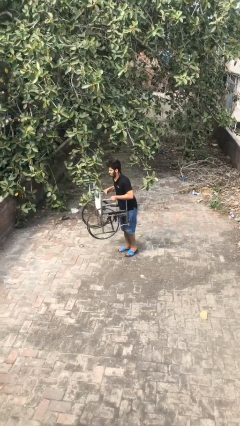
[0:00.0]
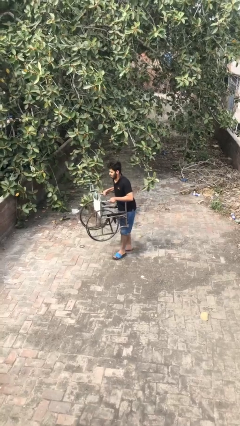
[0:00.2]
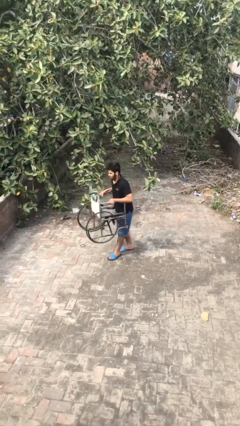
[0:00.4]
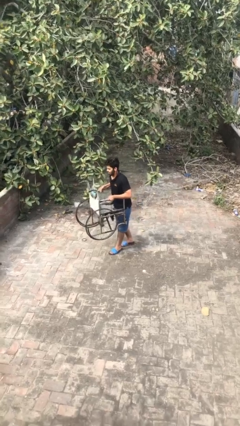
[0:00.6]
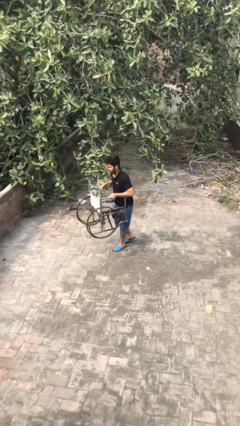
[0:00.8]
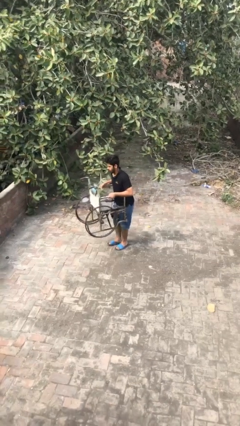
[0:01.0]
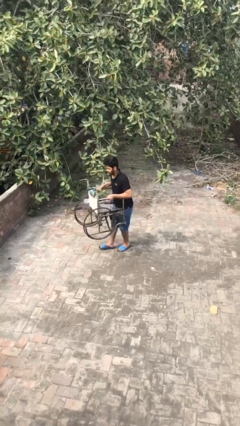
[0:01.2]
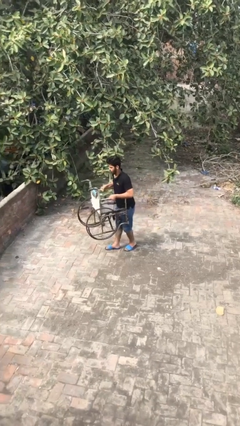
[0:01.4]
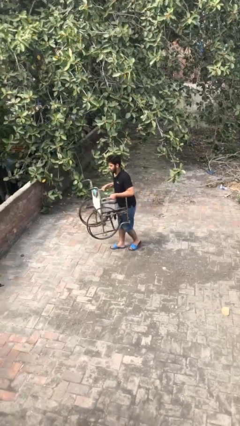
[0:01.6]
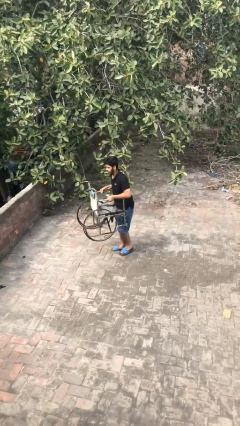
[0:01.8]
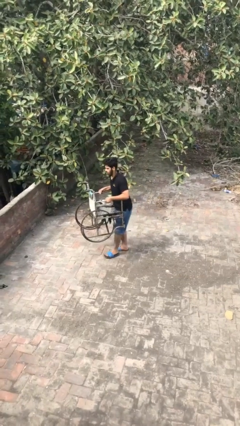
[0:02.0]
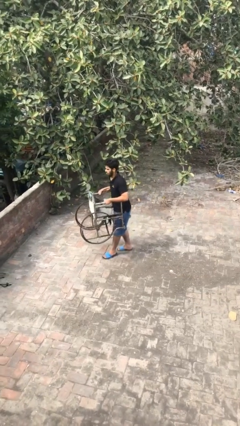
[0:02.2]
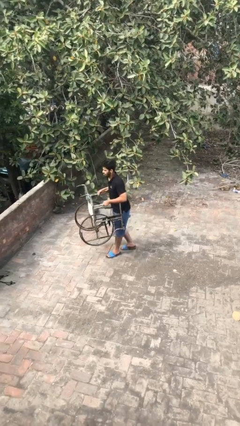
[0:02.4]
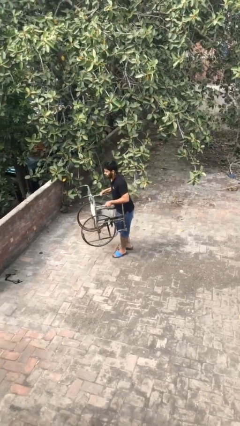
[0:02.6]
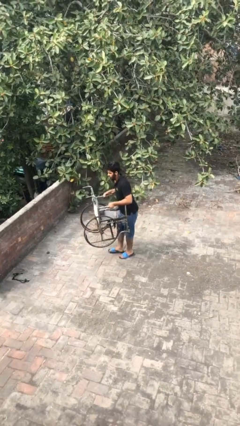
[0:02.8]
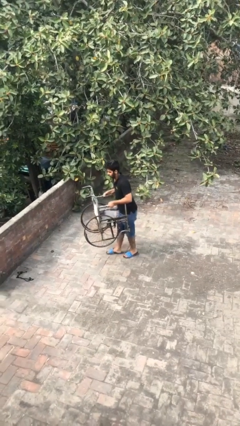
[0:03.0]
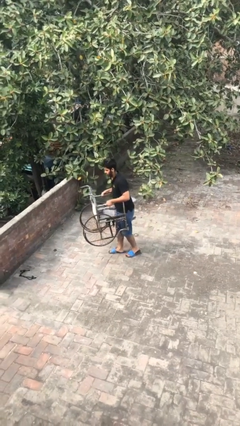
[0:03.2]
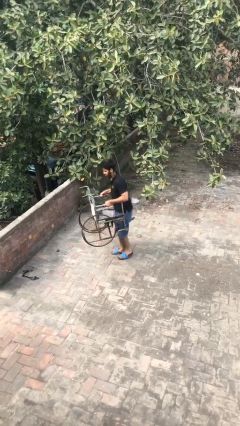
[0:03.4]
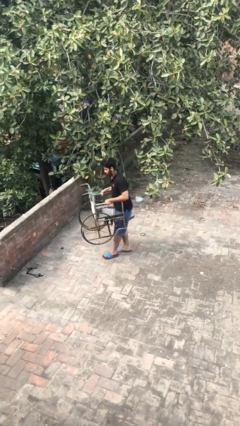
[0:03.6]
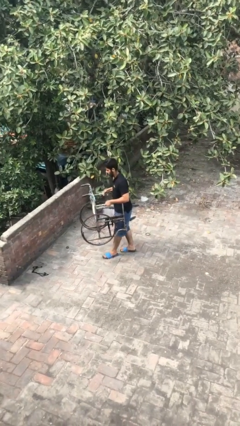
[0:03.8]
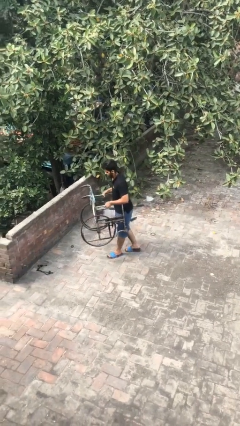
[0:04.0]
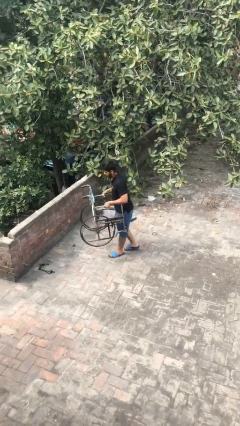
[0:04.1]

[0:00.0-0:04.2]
person carries heavy object

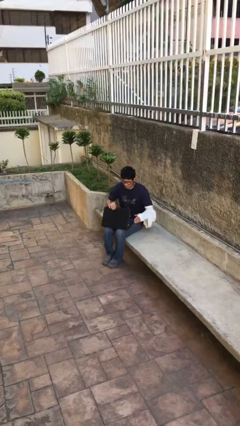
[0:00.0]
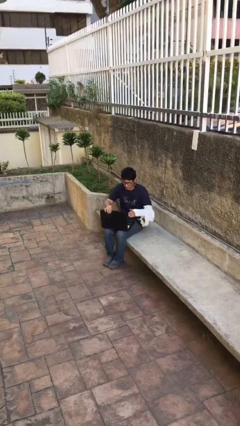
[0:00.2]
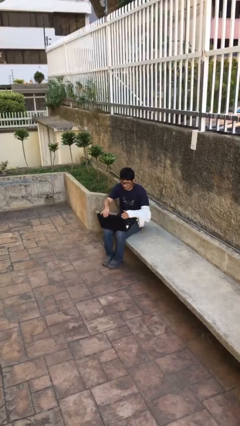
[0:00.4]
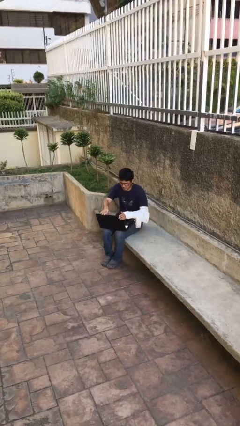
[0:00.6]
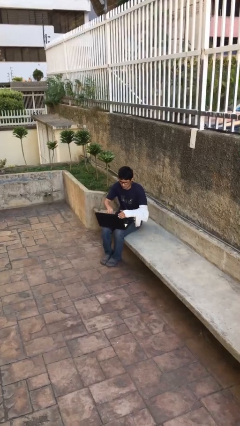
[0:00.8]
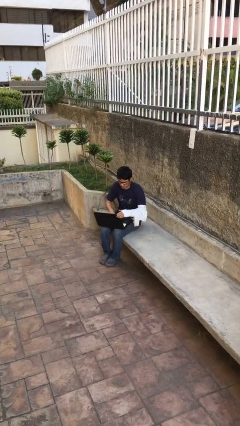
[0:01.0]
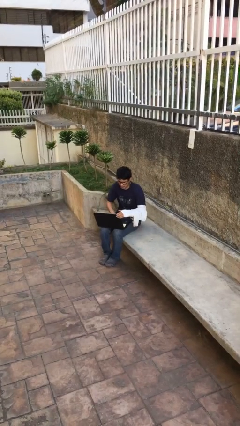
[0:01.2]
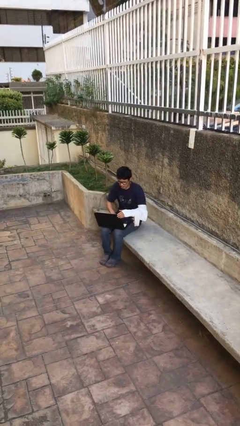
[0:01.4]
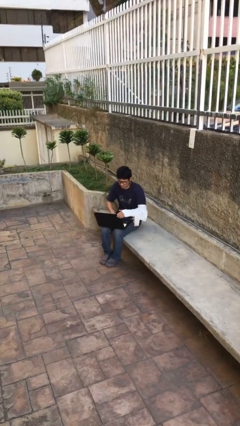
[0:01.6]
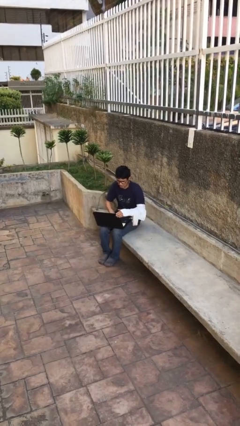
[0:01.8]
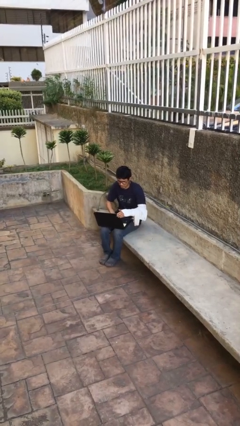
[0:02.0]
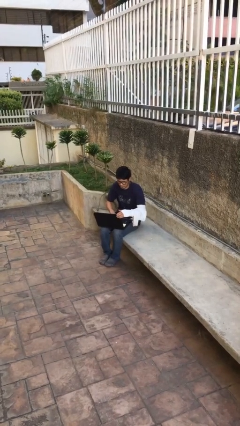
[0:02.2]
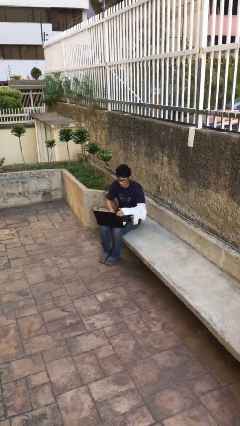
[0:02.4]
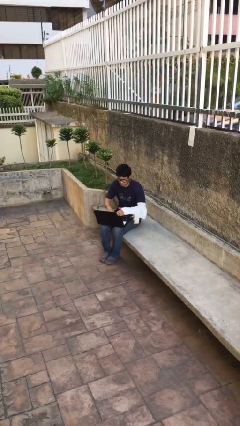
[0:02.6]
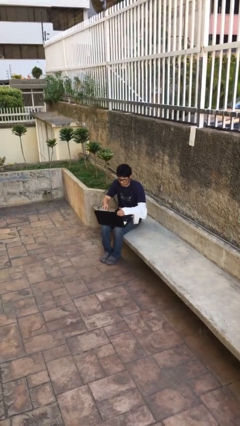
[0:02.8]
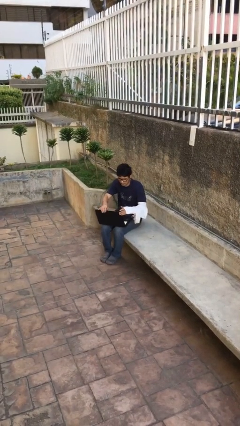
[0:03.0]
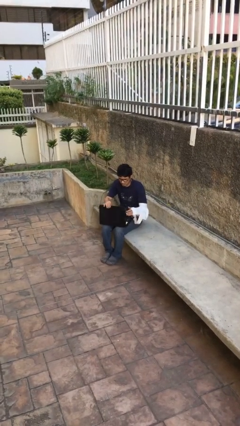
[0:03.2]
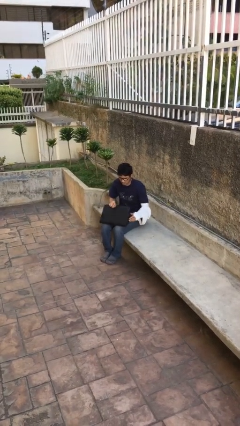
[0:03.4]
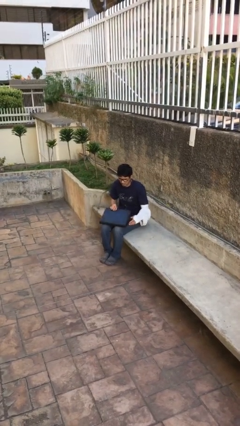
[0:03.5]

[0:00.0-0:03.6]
person interacts with laptop

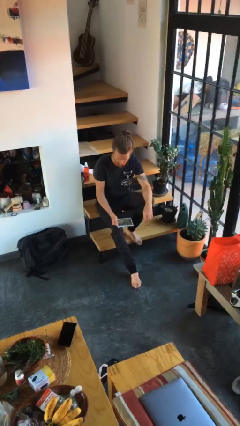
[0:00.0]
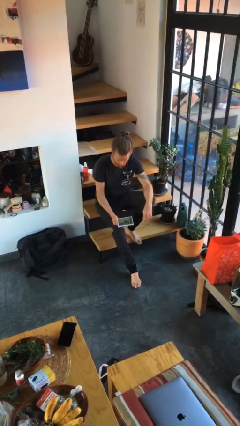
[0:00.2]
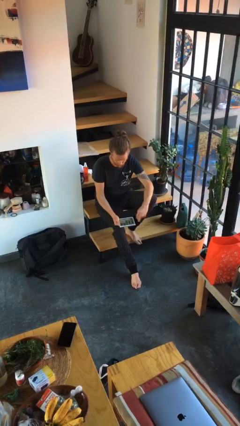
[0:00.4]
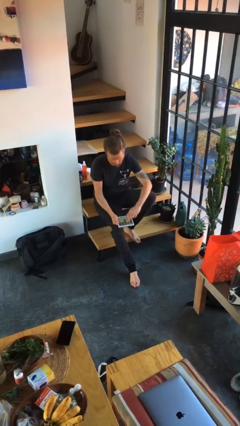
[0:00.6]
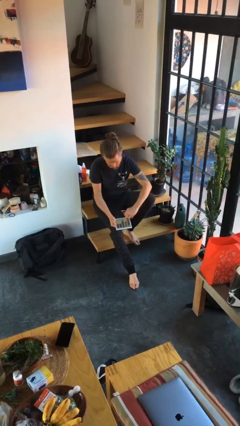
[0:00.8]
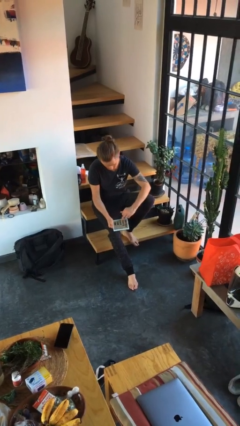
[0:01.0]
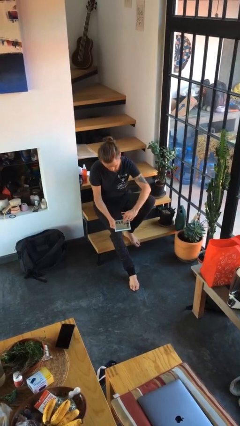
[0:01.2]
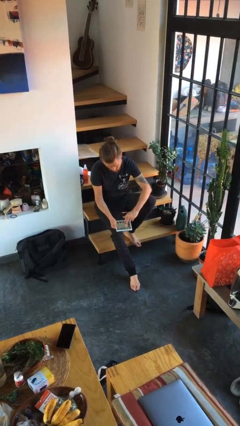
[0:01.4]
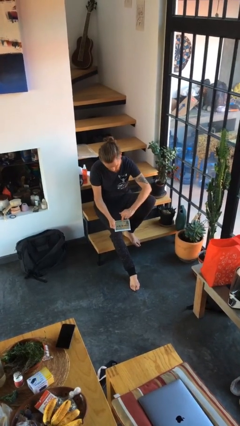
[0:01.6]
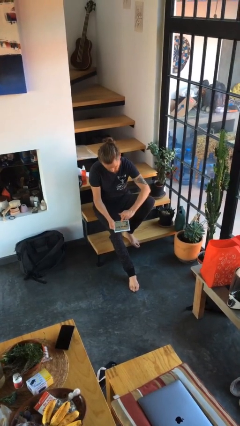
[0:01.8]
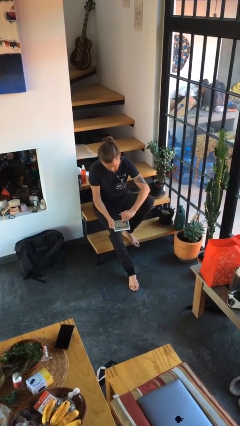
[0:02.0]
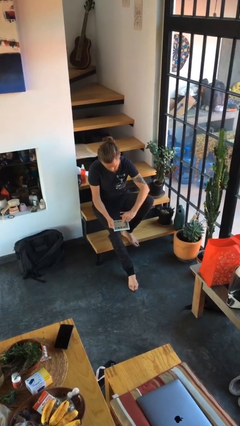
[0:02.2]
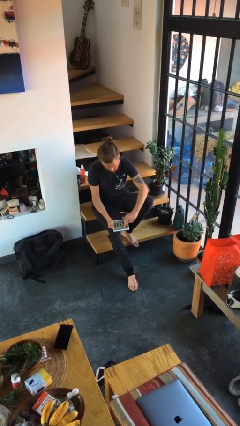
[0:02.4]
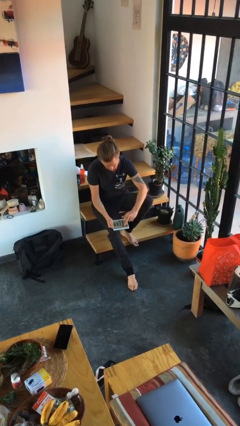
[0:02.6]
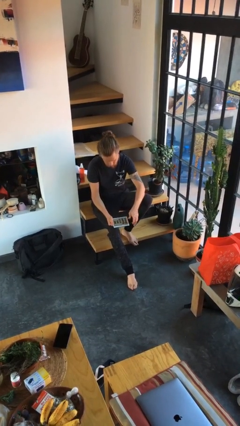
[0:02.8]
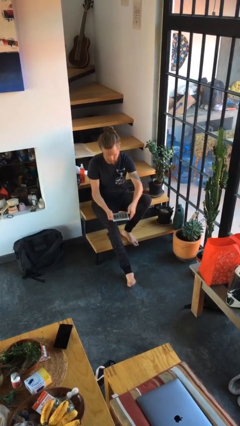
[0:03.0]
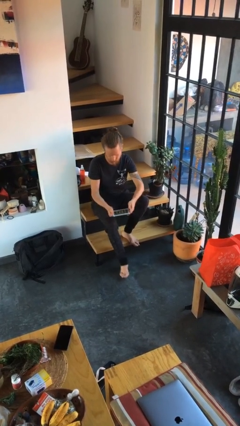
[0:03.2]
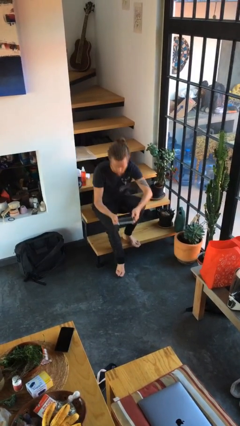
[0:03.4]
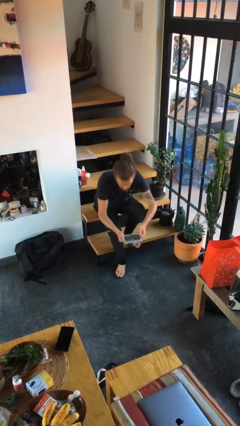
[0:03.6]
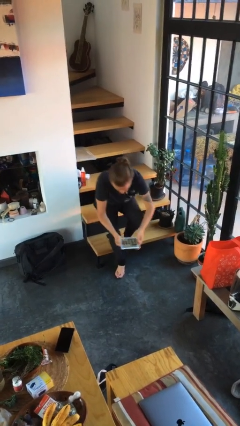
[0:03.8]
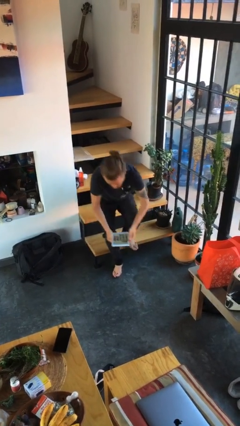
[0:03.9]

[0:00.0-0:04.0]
person interacts with tablet

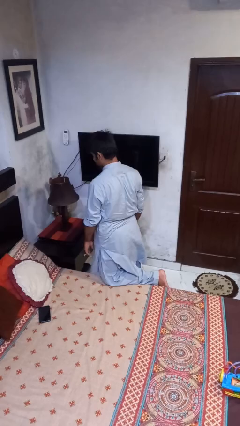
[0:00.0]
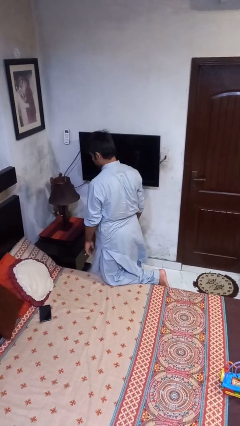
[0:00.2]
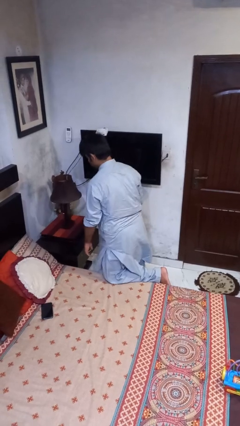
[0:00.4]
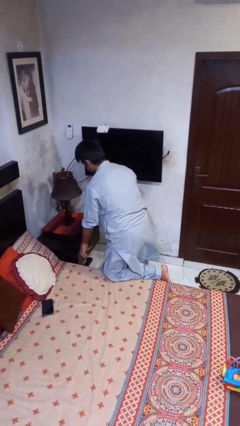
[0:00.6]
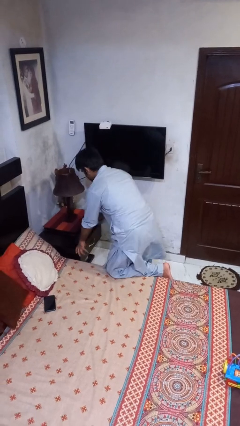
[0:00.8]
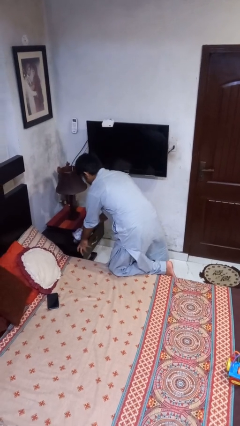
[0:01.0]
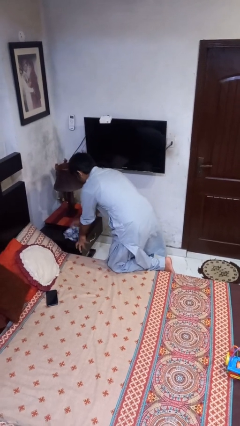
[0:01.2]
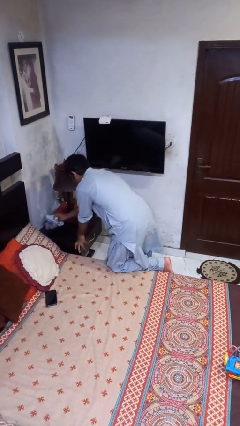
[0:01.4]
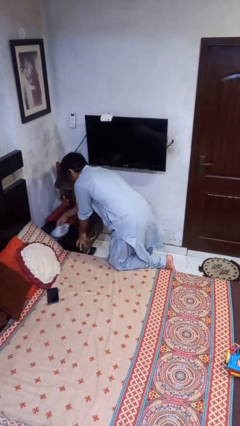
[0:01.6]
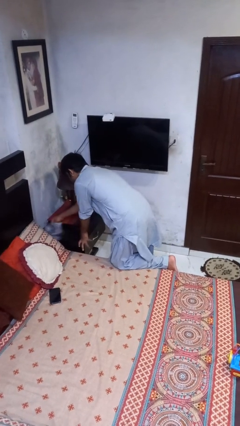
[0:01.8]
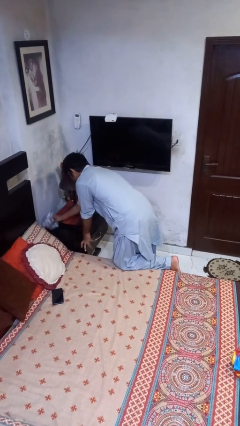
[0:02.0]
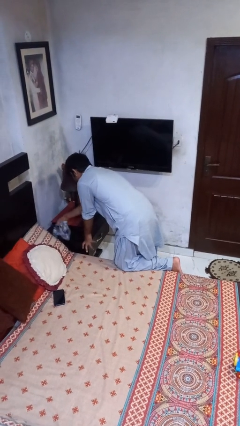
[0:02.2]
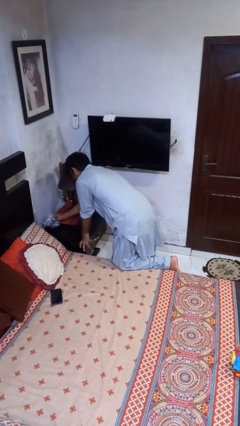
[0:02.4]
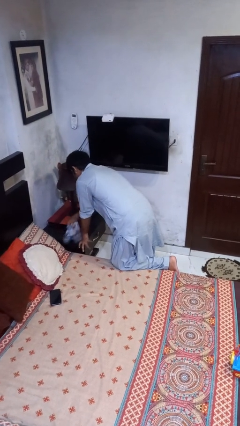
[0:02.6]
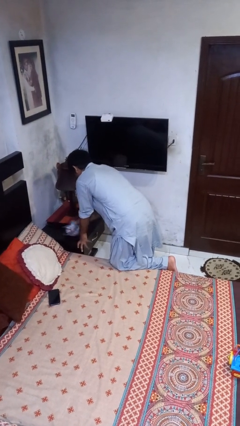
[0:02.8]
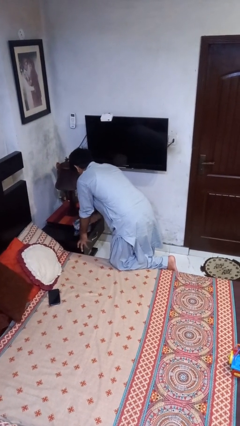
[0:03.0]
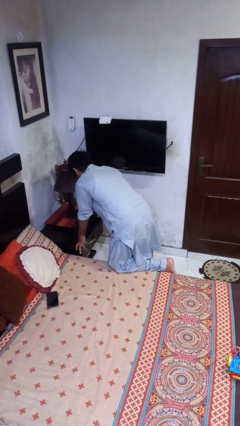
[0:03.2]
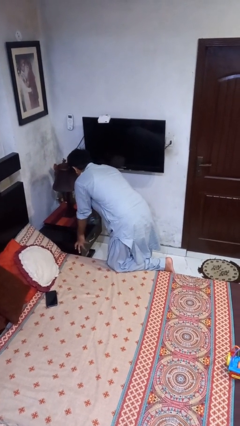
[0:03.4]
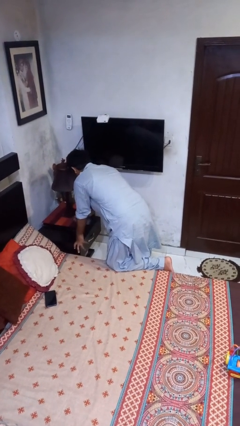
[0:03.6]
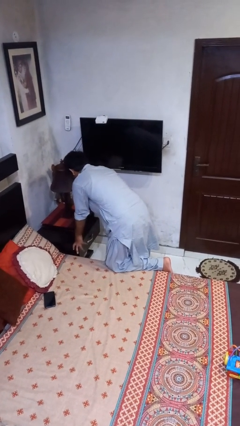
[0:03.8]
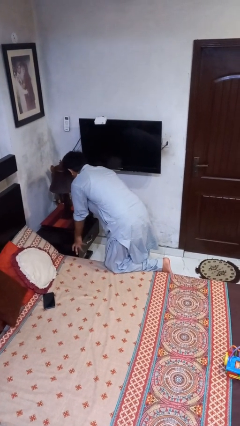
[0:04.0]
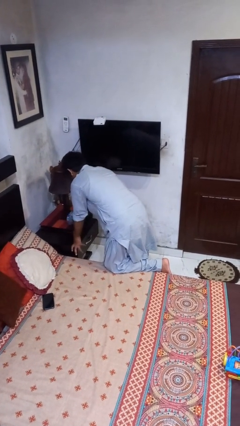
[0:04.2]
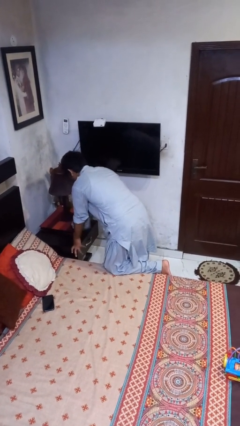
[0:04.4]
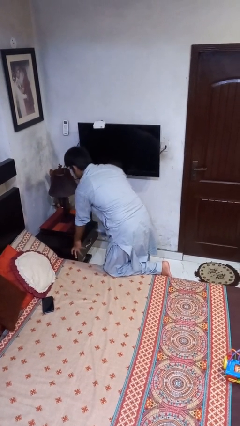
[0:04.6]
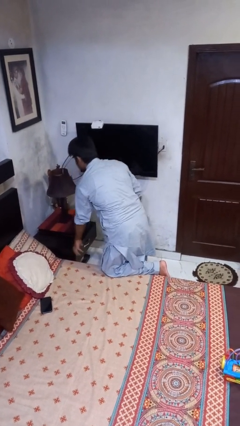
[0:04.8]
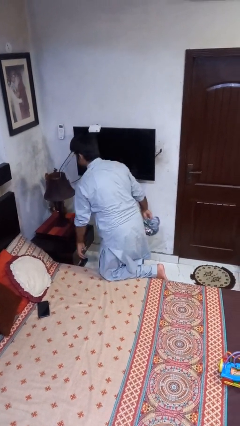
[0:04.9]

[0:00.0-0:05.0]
person cleans table with rag

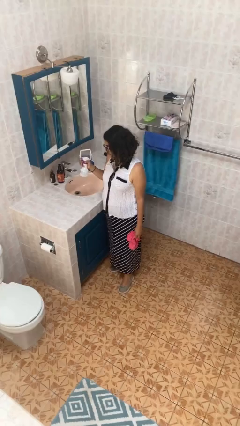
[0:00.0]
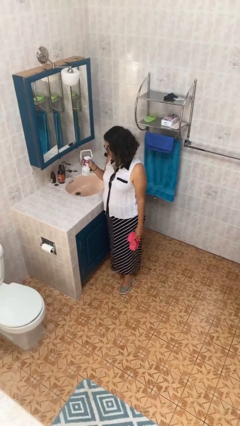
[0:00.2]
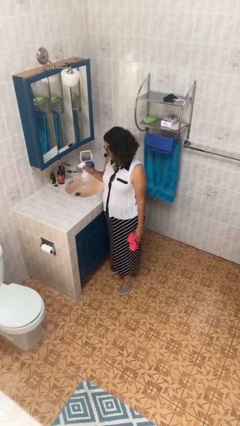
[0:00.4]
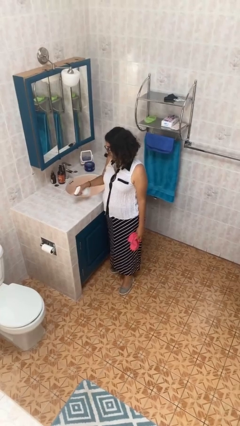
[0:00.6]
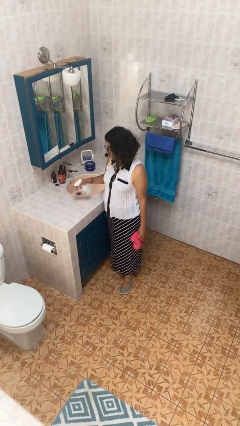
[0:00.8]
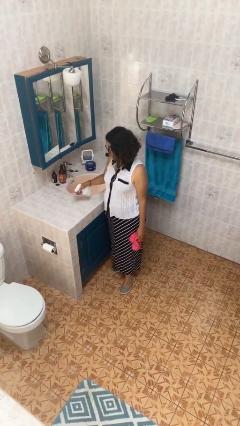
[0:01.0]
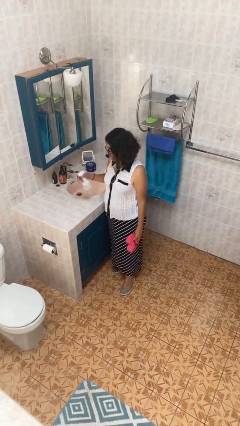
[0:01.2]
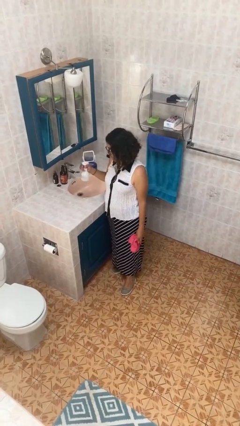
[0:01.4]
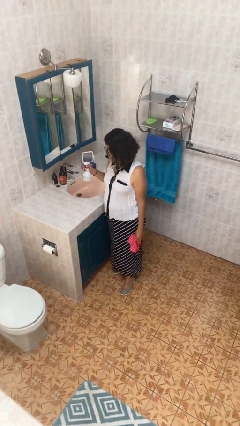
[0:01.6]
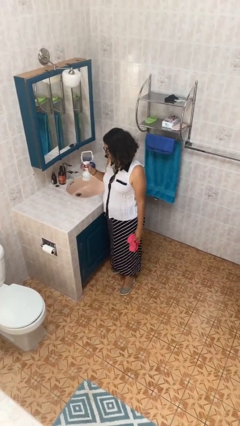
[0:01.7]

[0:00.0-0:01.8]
person sprays from bottle
